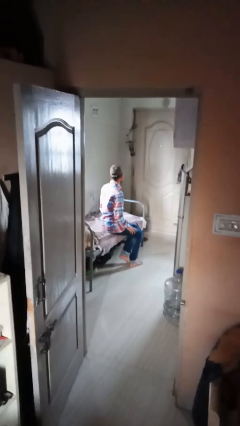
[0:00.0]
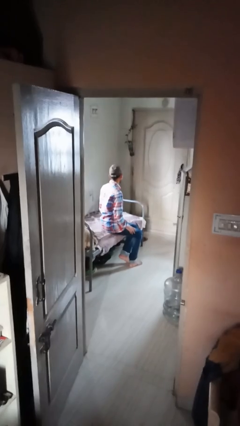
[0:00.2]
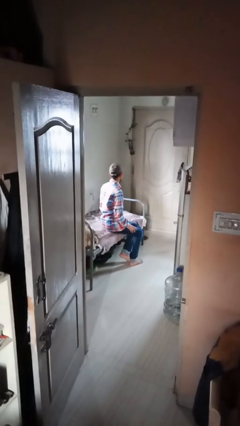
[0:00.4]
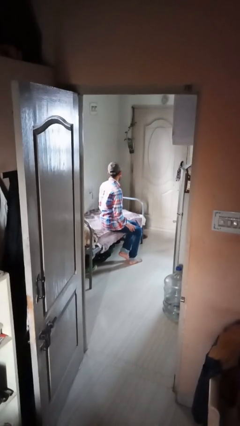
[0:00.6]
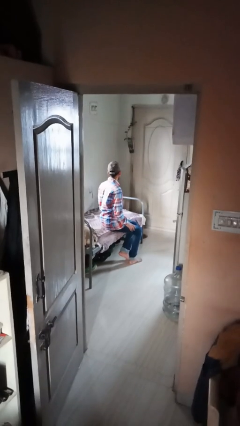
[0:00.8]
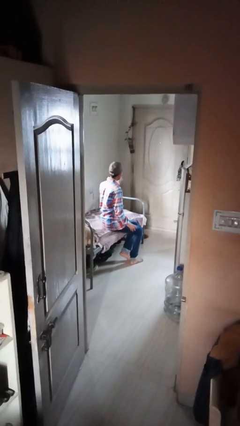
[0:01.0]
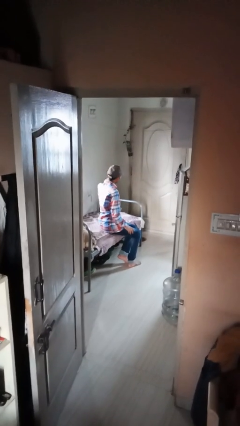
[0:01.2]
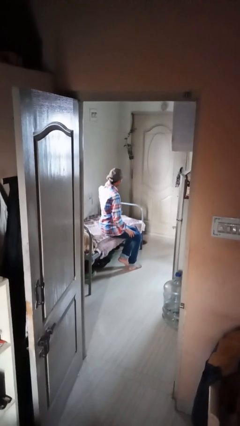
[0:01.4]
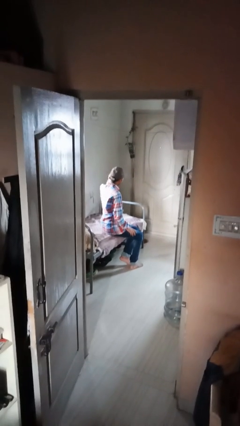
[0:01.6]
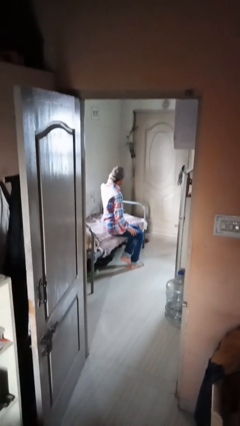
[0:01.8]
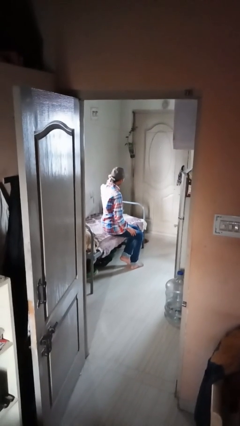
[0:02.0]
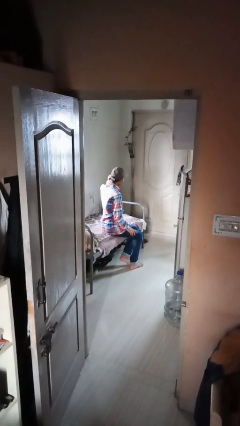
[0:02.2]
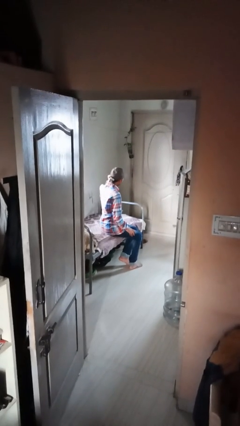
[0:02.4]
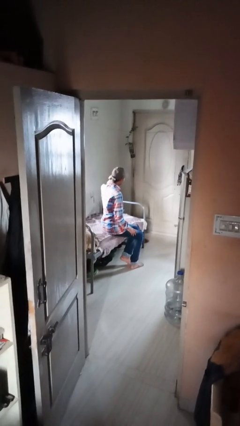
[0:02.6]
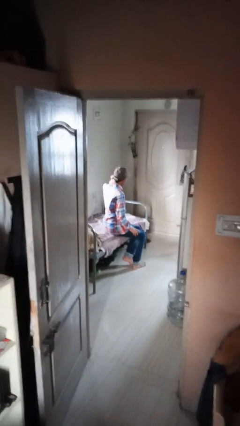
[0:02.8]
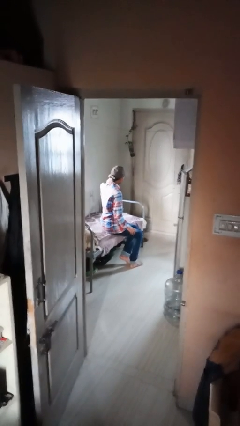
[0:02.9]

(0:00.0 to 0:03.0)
person puts fingers in ear

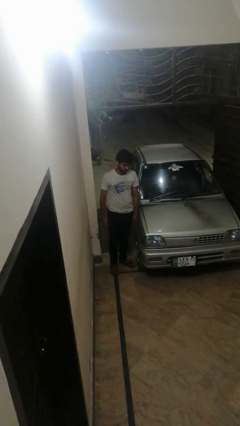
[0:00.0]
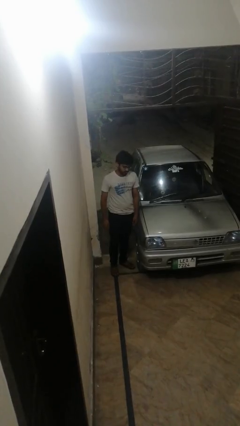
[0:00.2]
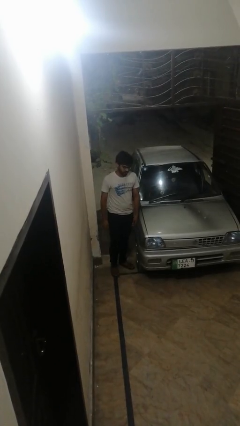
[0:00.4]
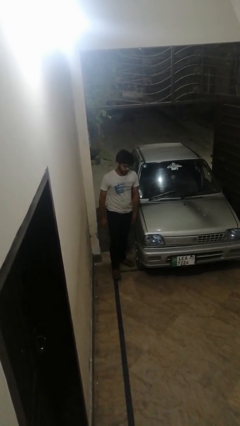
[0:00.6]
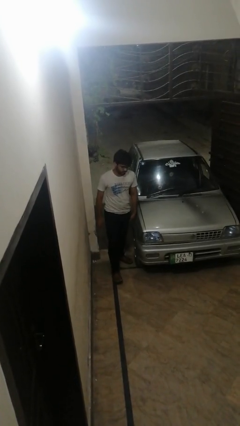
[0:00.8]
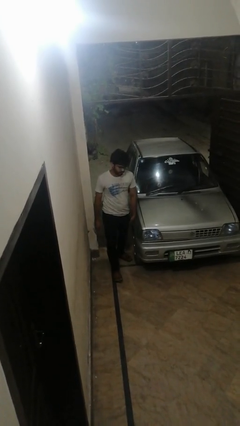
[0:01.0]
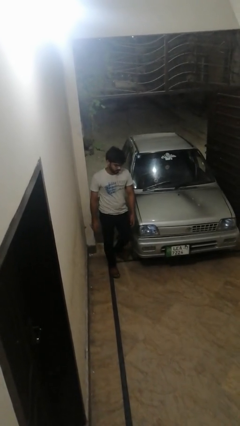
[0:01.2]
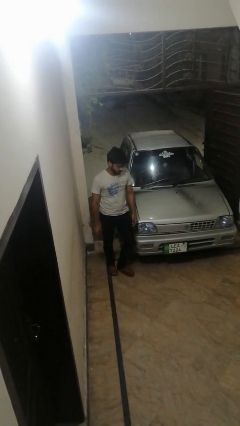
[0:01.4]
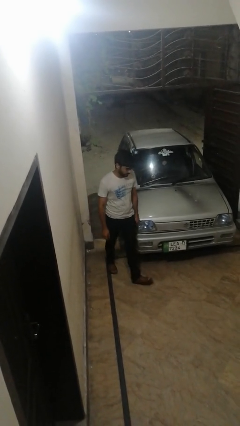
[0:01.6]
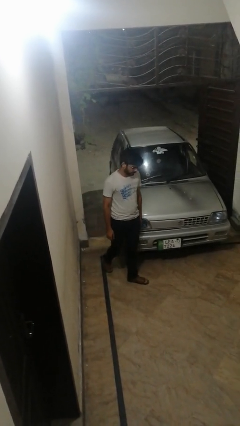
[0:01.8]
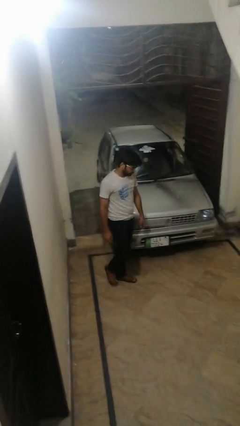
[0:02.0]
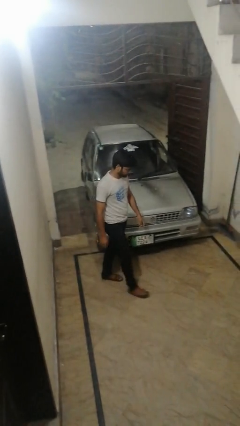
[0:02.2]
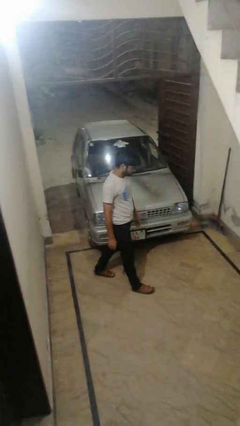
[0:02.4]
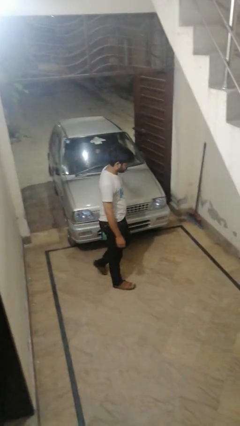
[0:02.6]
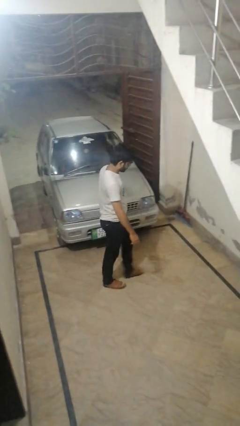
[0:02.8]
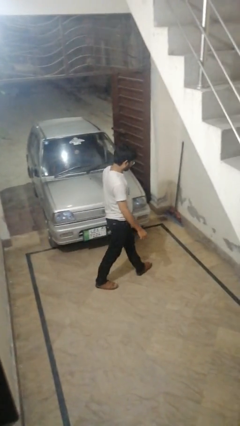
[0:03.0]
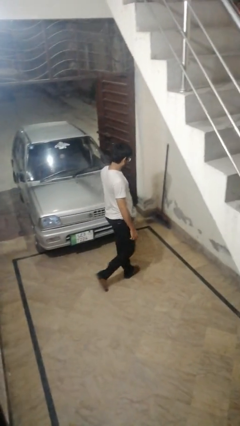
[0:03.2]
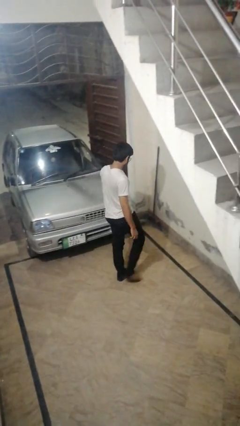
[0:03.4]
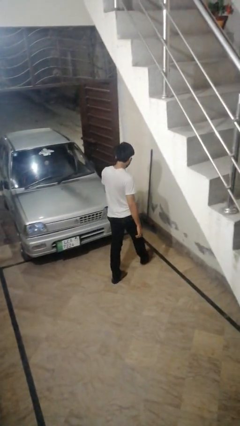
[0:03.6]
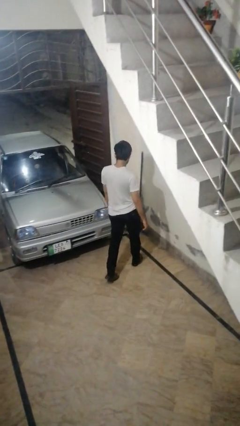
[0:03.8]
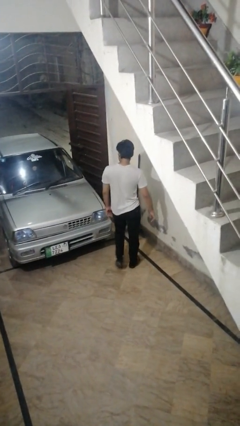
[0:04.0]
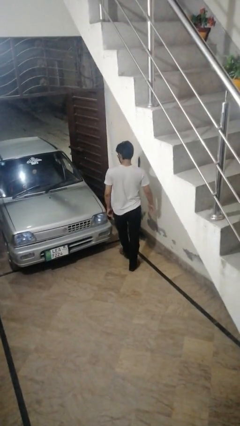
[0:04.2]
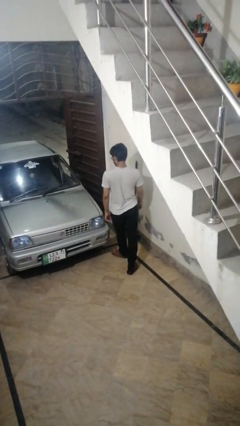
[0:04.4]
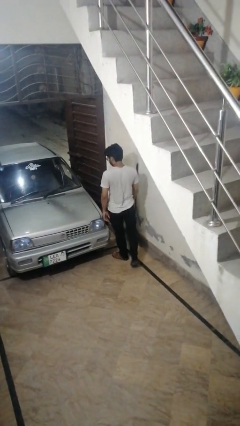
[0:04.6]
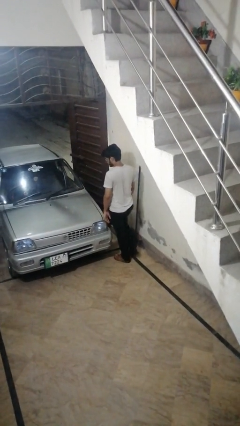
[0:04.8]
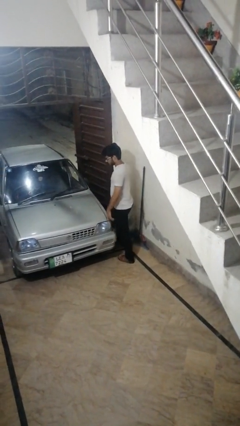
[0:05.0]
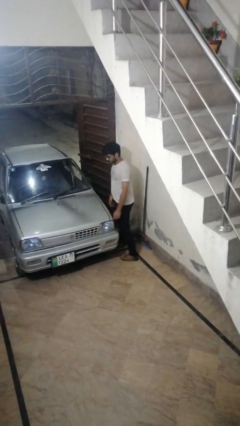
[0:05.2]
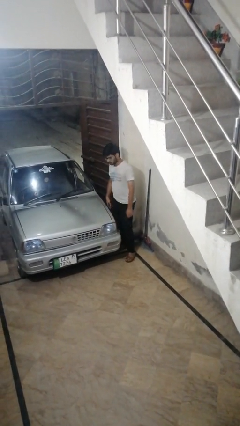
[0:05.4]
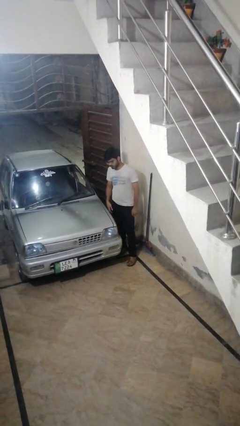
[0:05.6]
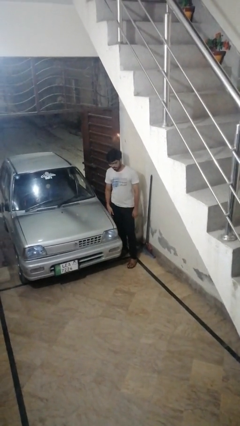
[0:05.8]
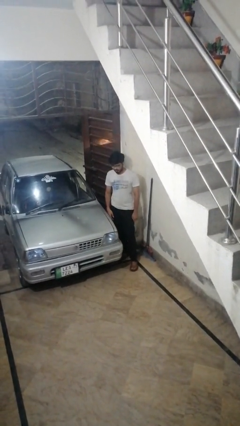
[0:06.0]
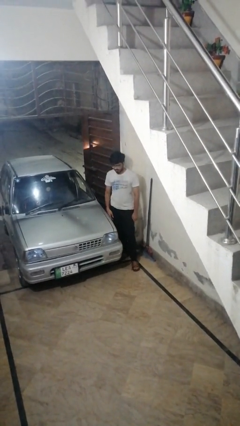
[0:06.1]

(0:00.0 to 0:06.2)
person walks around car

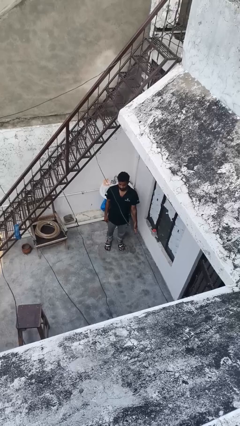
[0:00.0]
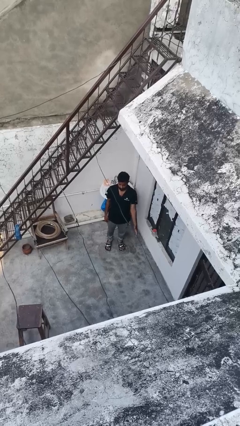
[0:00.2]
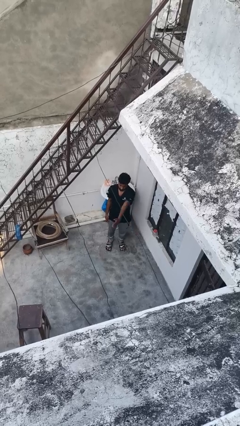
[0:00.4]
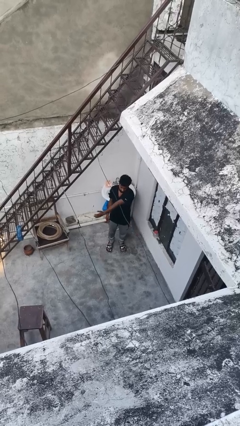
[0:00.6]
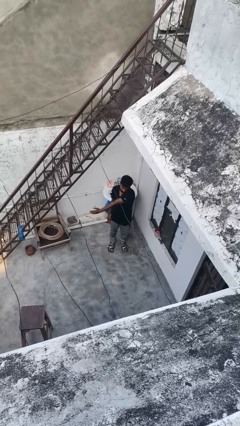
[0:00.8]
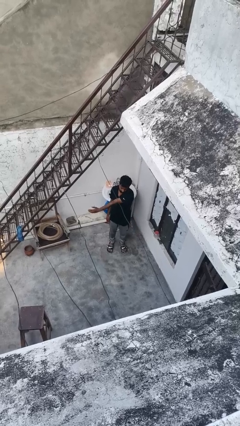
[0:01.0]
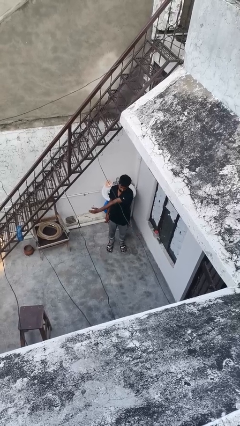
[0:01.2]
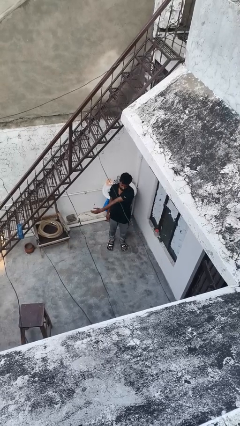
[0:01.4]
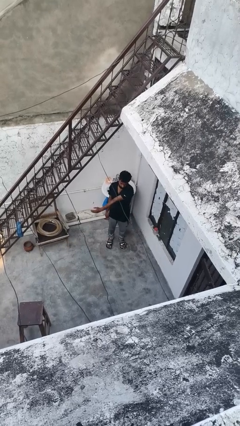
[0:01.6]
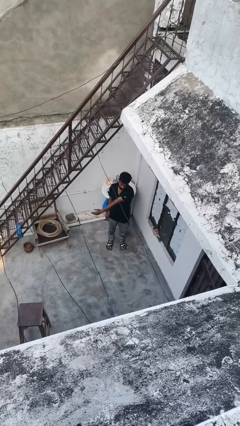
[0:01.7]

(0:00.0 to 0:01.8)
person gestures swipe left

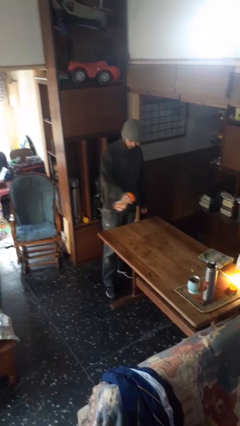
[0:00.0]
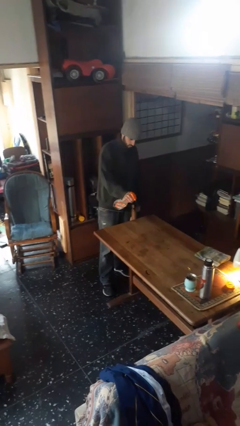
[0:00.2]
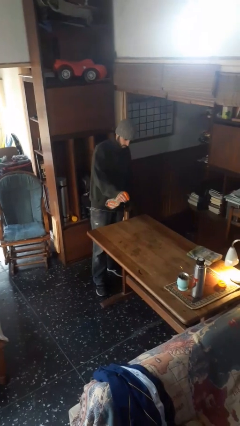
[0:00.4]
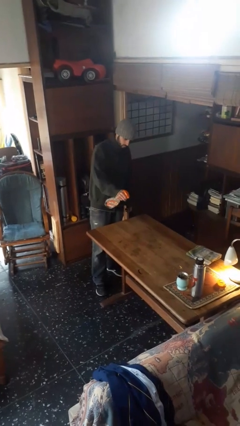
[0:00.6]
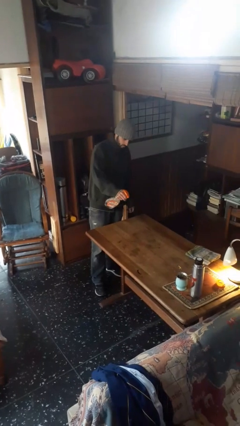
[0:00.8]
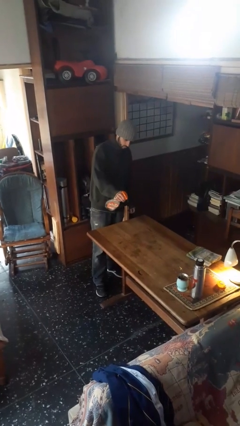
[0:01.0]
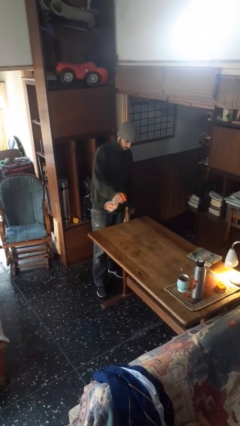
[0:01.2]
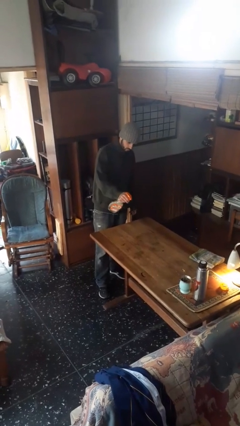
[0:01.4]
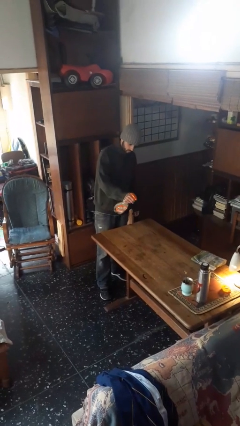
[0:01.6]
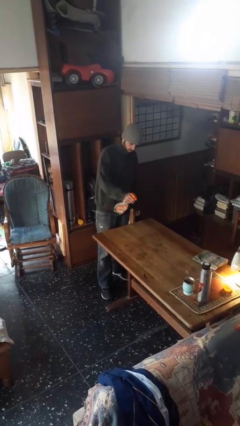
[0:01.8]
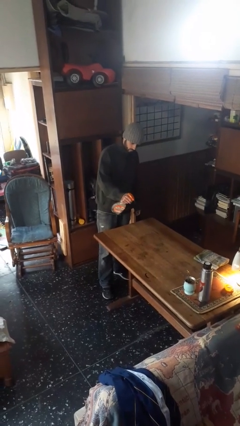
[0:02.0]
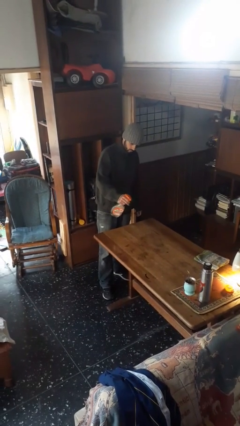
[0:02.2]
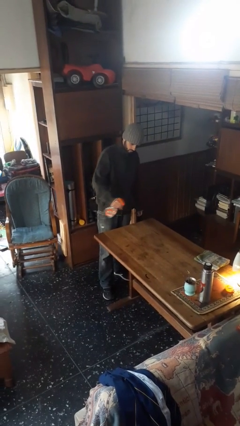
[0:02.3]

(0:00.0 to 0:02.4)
person sprays from bottle

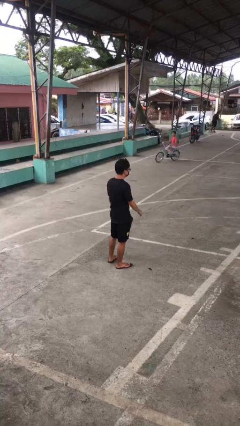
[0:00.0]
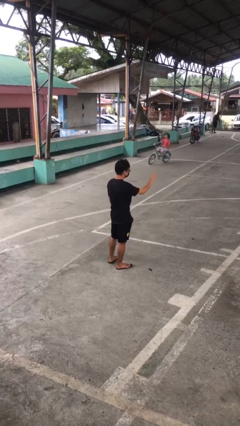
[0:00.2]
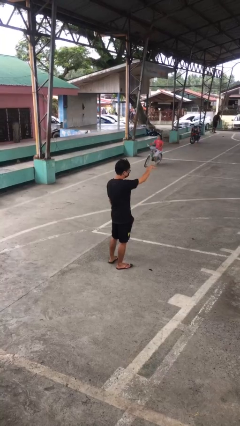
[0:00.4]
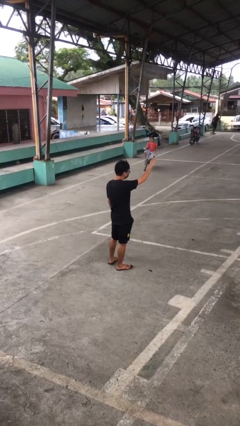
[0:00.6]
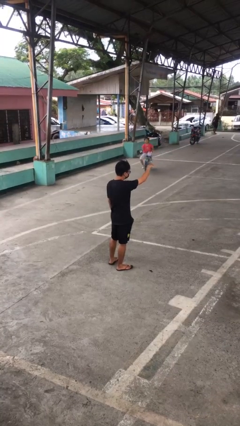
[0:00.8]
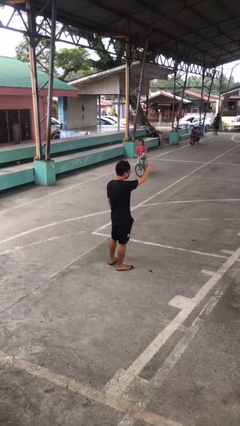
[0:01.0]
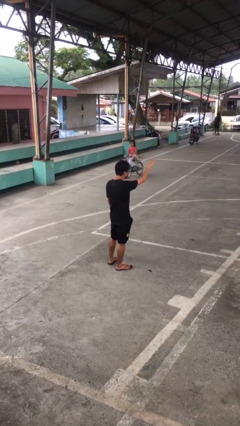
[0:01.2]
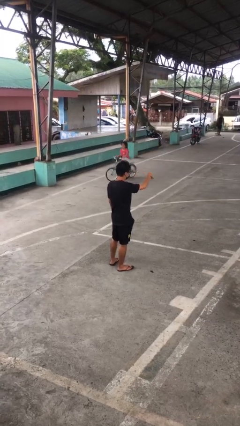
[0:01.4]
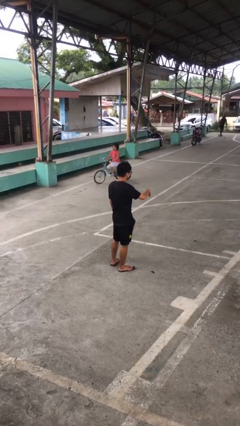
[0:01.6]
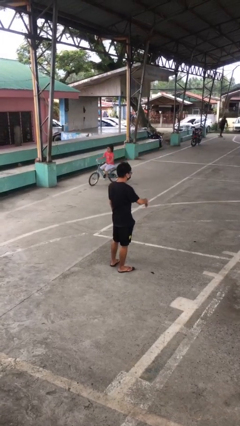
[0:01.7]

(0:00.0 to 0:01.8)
person gestures come here

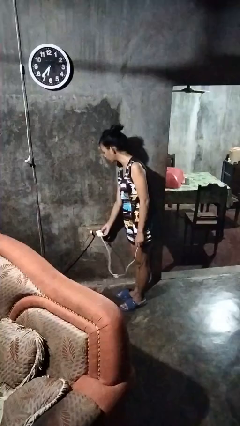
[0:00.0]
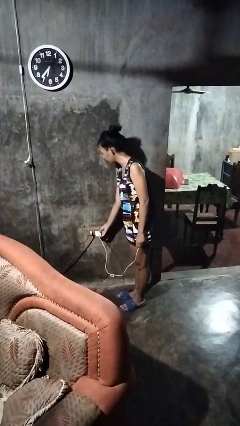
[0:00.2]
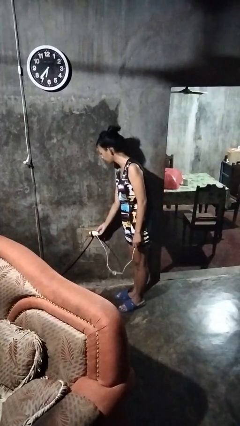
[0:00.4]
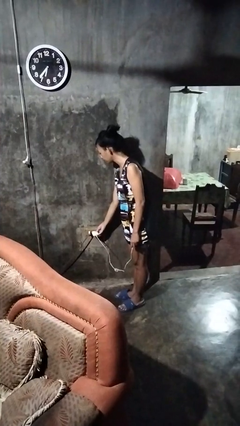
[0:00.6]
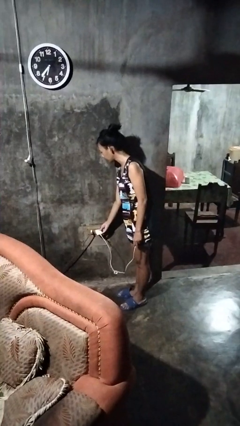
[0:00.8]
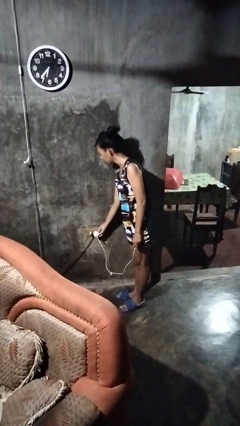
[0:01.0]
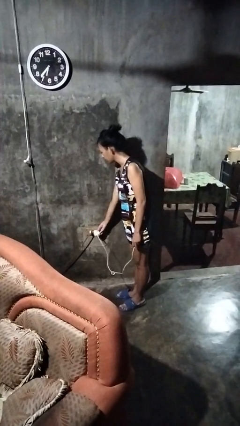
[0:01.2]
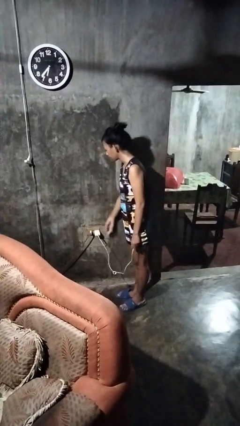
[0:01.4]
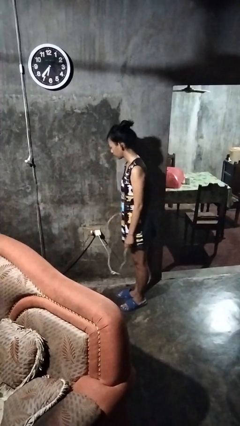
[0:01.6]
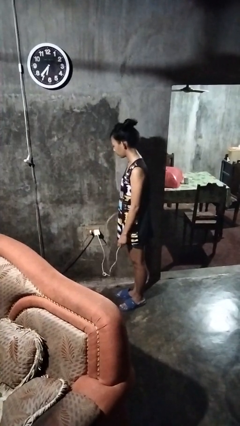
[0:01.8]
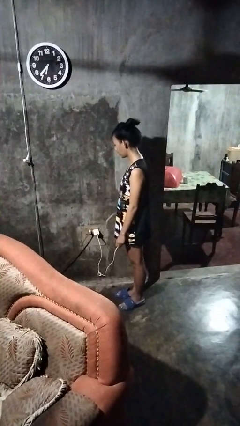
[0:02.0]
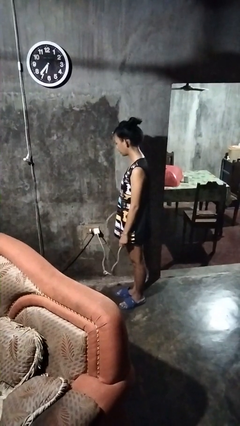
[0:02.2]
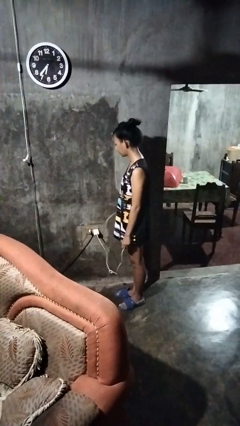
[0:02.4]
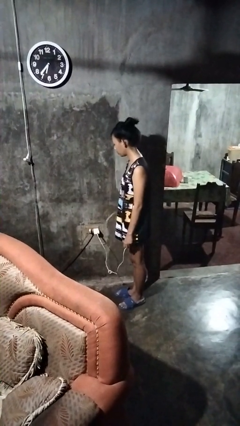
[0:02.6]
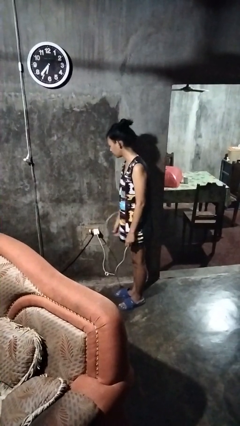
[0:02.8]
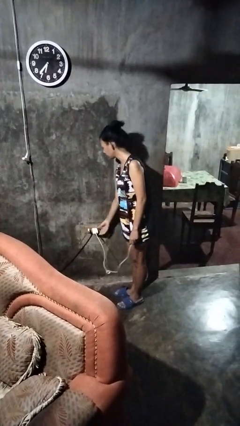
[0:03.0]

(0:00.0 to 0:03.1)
person plugs into electrical socket
